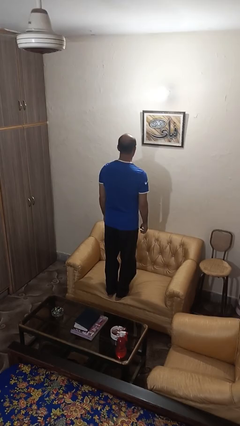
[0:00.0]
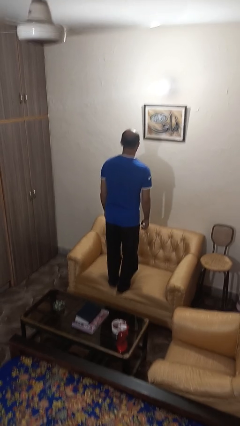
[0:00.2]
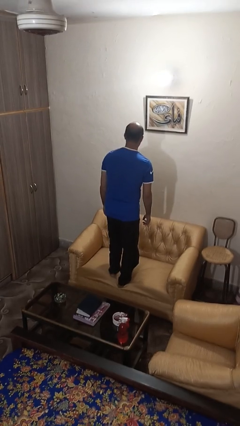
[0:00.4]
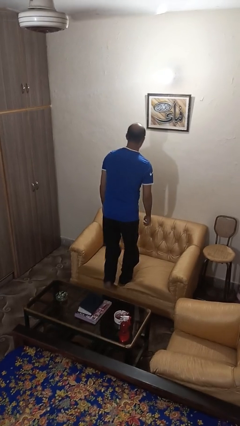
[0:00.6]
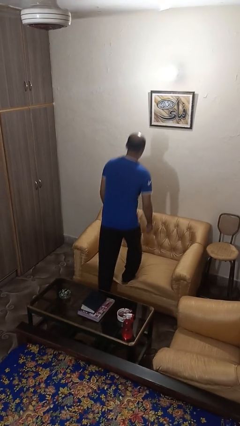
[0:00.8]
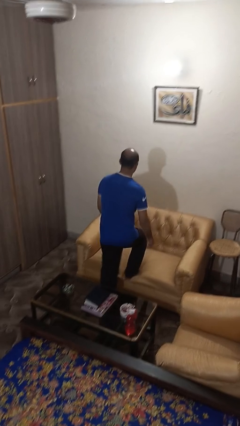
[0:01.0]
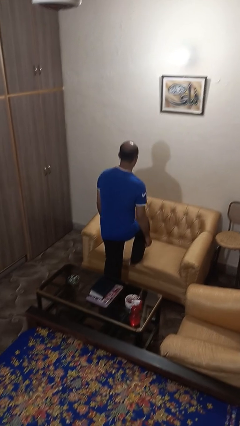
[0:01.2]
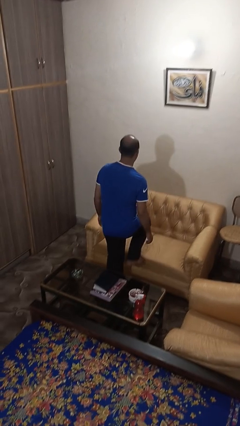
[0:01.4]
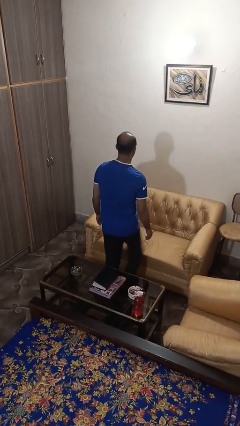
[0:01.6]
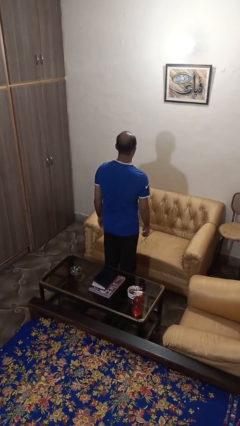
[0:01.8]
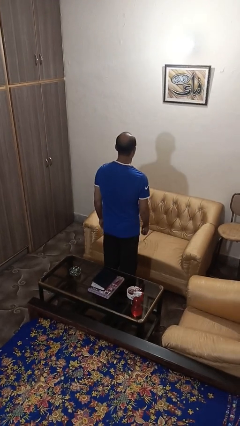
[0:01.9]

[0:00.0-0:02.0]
person climbs off couch

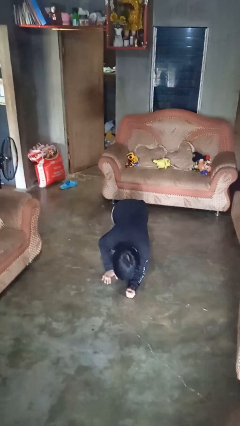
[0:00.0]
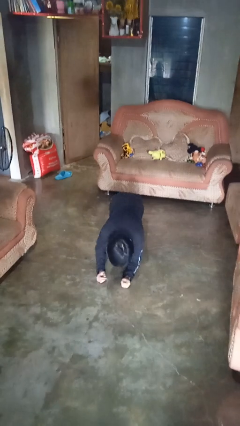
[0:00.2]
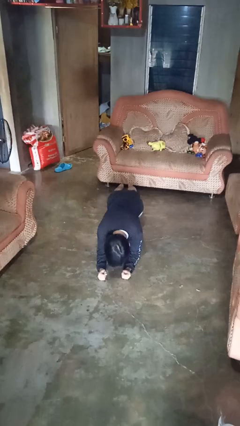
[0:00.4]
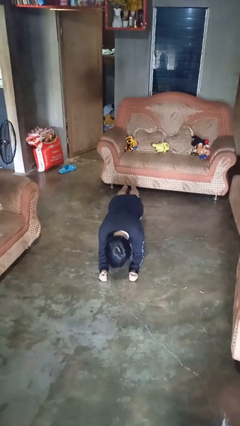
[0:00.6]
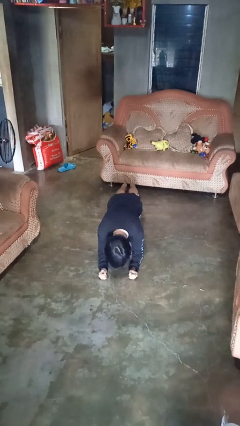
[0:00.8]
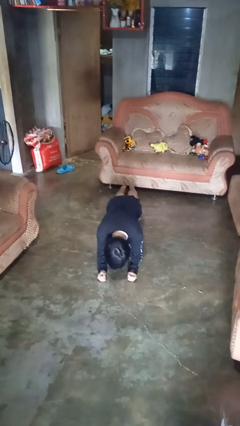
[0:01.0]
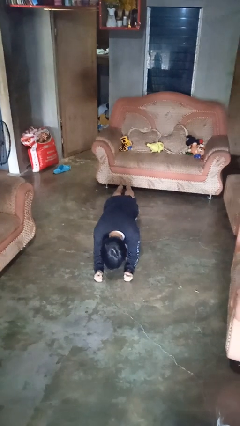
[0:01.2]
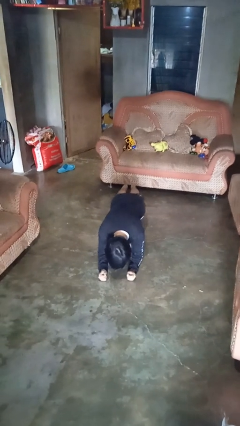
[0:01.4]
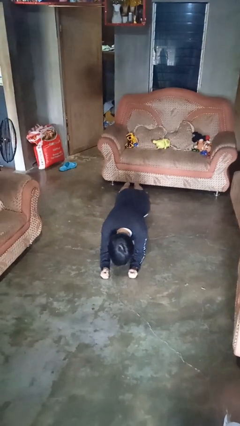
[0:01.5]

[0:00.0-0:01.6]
person exercises with plank

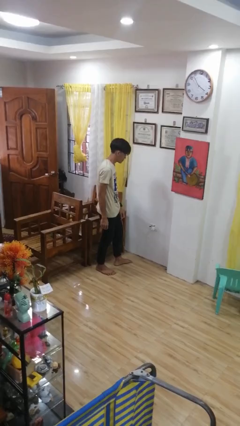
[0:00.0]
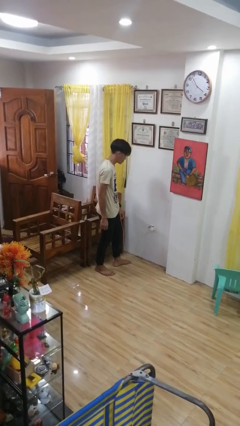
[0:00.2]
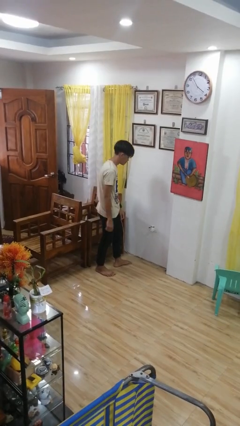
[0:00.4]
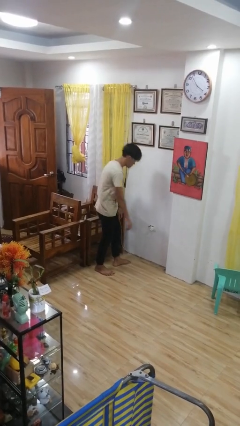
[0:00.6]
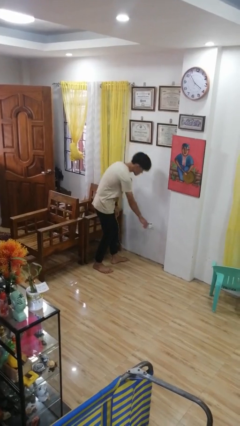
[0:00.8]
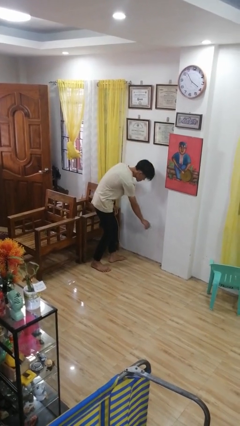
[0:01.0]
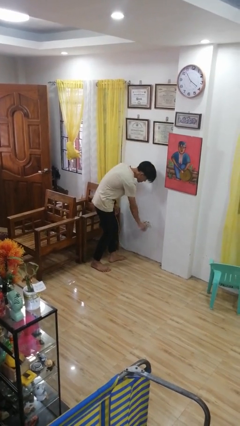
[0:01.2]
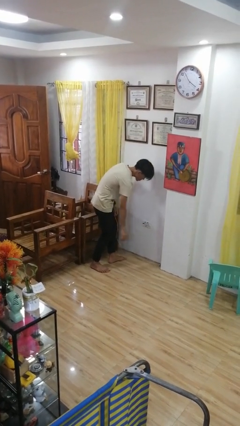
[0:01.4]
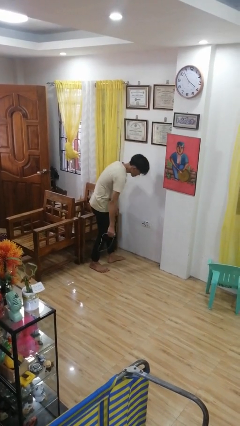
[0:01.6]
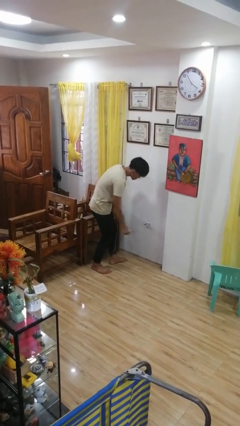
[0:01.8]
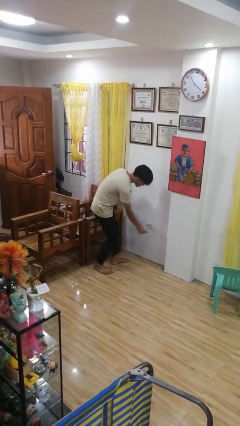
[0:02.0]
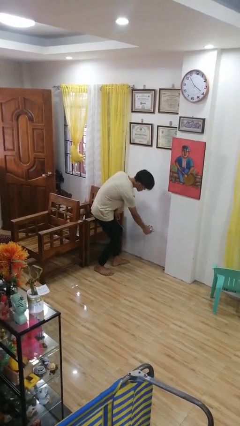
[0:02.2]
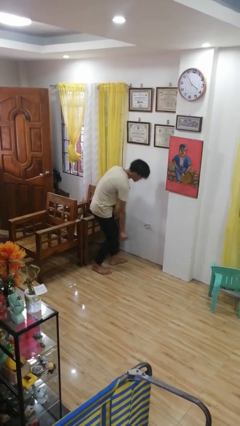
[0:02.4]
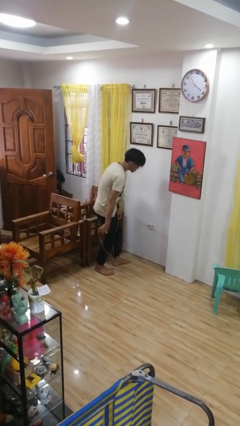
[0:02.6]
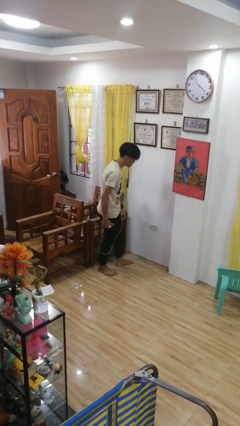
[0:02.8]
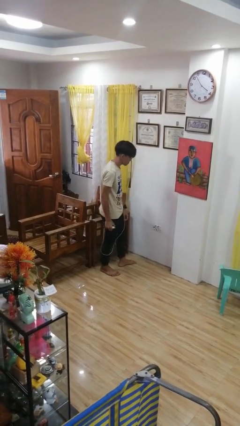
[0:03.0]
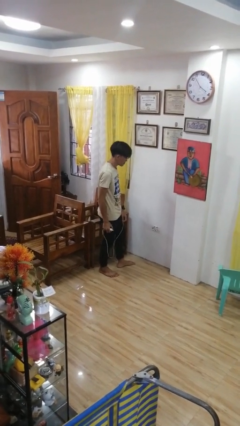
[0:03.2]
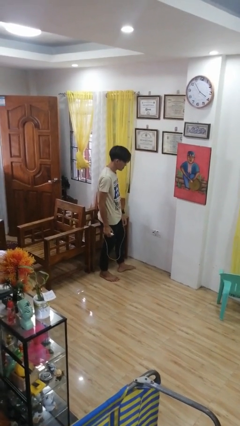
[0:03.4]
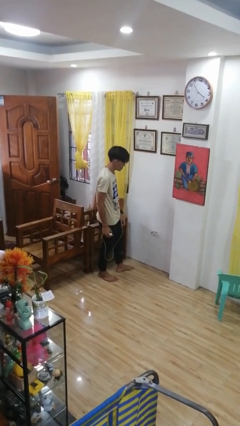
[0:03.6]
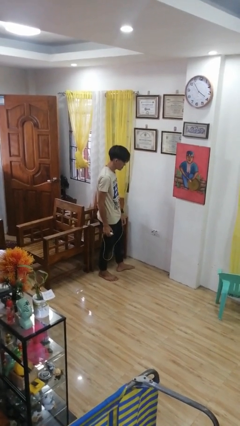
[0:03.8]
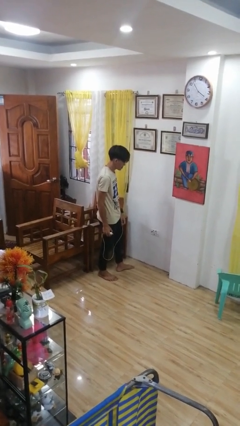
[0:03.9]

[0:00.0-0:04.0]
person unplugs from electrical socket

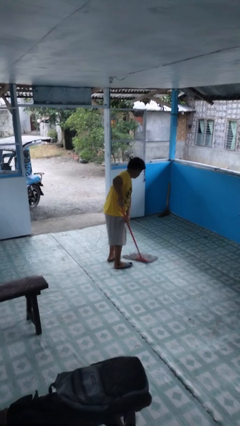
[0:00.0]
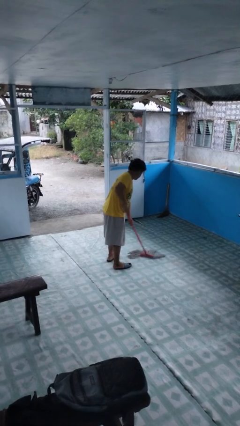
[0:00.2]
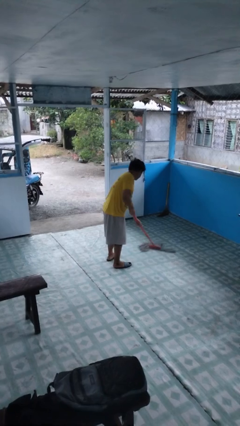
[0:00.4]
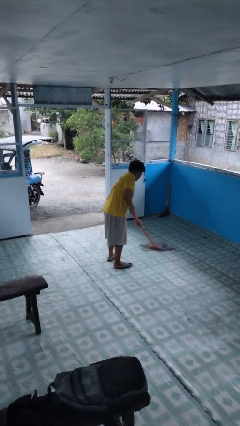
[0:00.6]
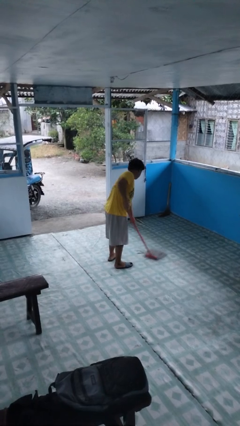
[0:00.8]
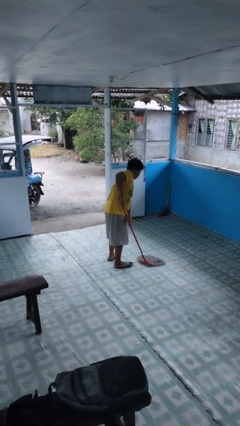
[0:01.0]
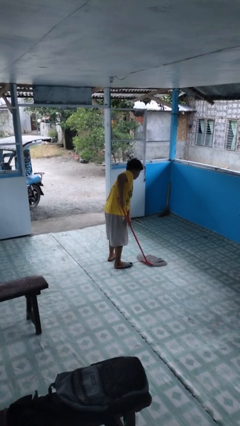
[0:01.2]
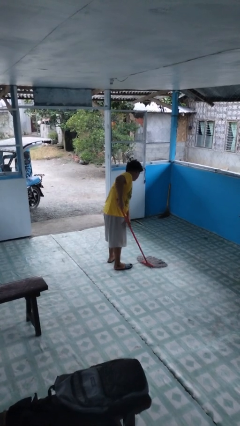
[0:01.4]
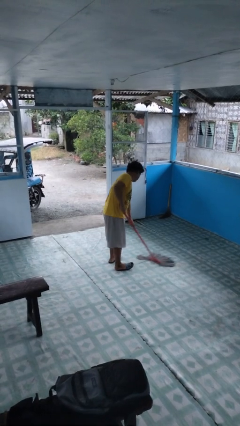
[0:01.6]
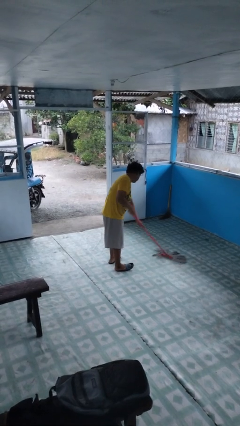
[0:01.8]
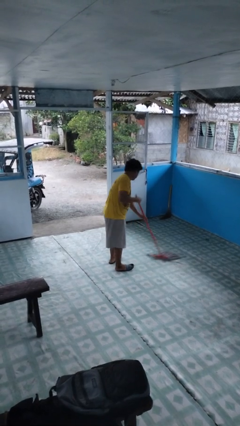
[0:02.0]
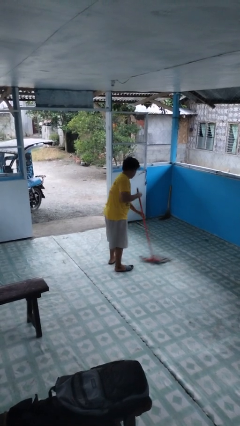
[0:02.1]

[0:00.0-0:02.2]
person mops

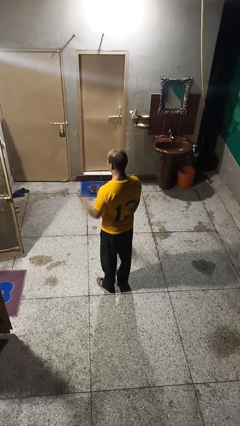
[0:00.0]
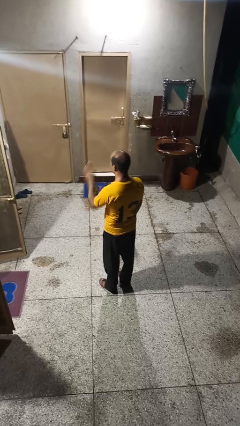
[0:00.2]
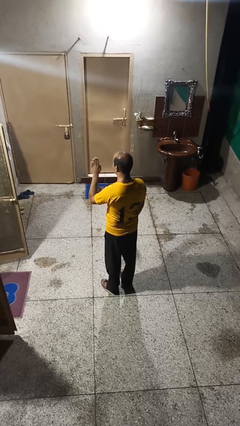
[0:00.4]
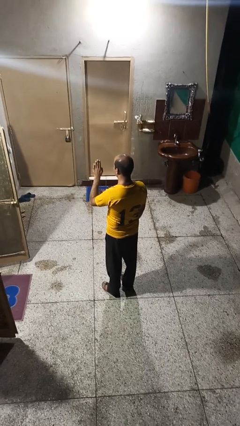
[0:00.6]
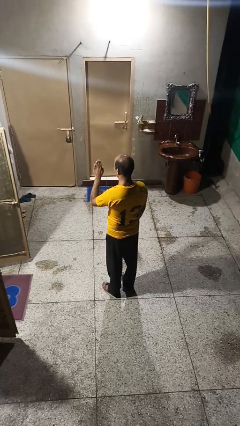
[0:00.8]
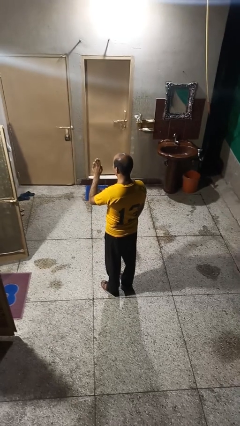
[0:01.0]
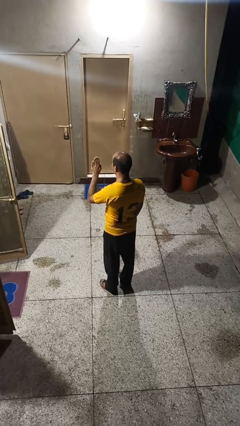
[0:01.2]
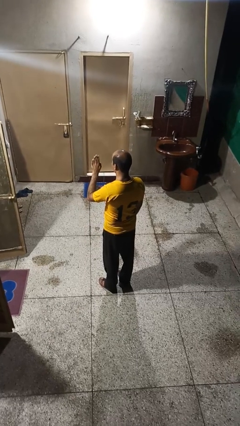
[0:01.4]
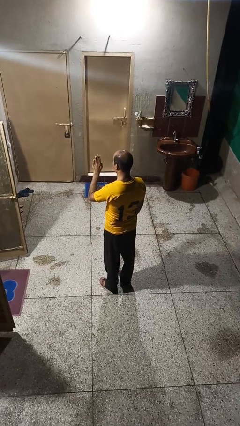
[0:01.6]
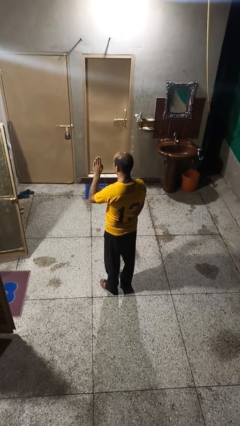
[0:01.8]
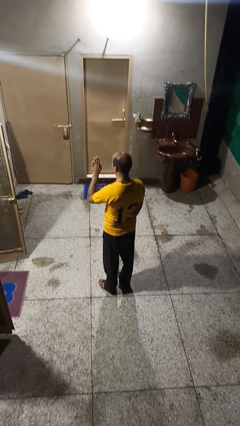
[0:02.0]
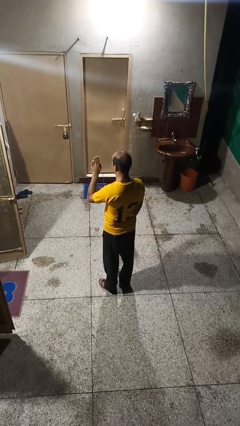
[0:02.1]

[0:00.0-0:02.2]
person gestures stop

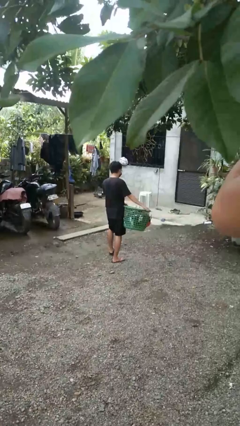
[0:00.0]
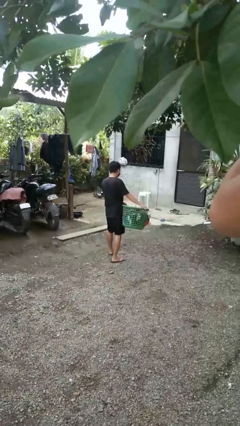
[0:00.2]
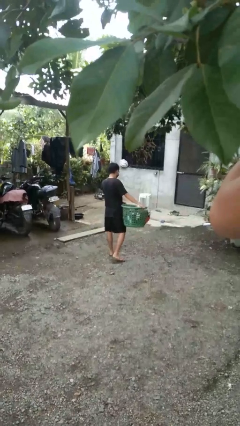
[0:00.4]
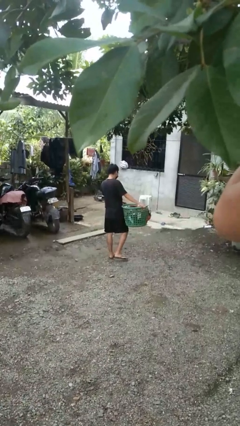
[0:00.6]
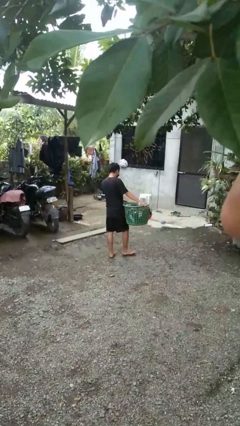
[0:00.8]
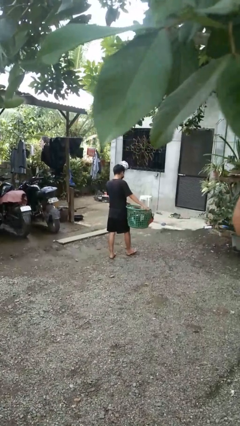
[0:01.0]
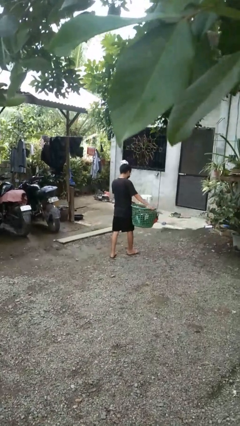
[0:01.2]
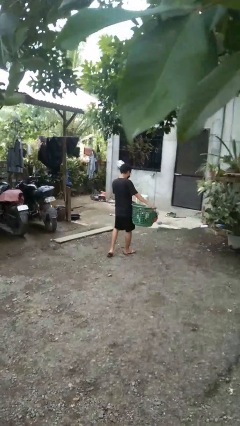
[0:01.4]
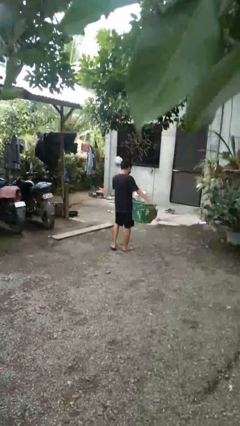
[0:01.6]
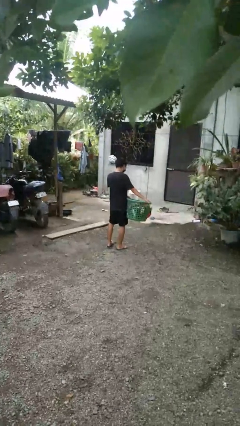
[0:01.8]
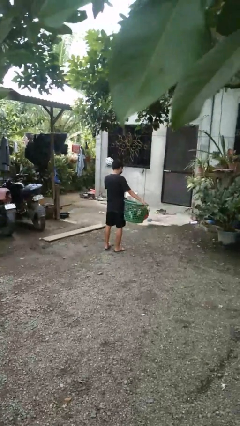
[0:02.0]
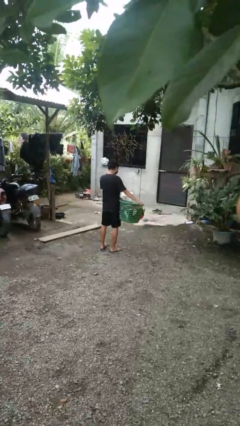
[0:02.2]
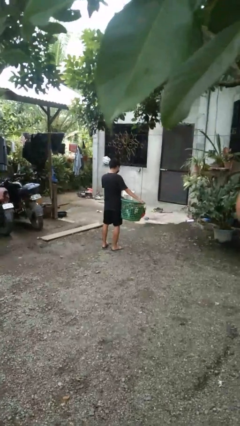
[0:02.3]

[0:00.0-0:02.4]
person carries laundry basket

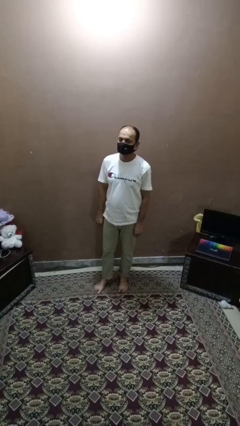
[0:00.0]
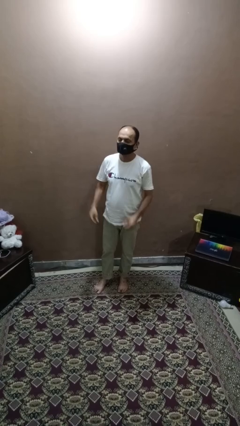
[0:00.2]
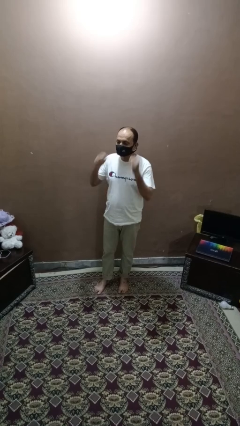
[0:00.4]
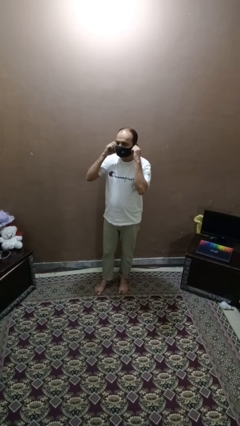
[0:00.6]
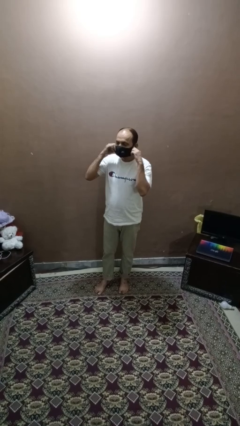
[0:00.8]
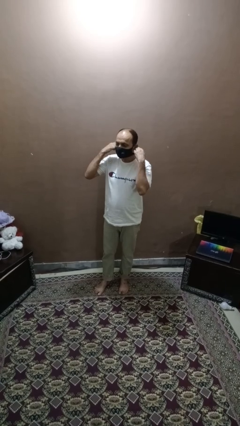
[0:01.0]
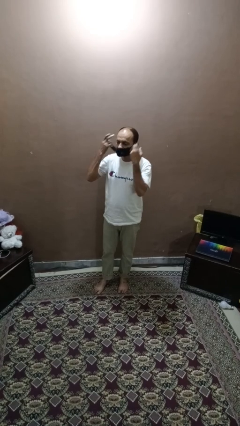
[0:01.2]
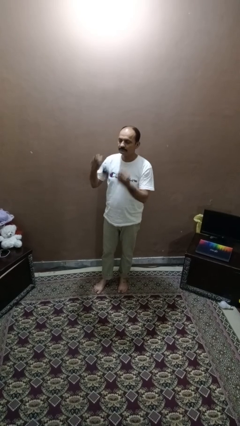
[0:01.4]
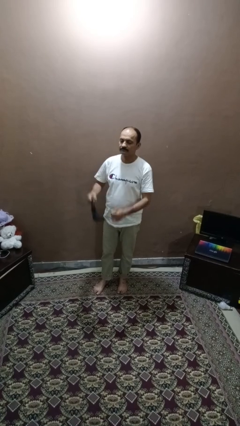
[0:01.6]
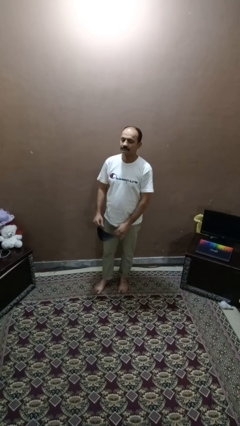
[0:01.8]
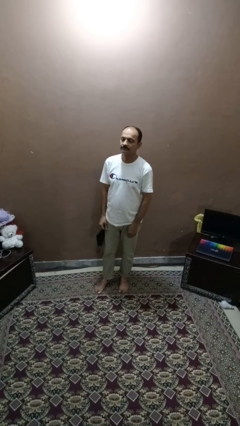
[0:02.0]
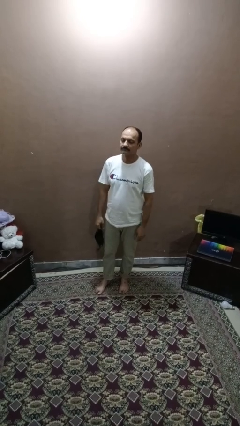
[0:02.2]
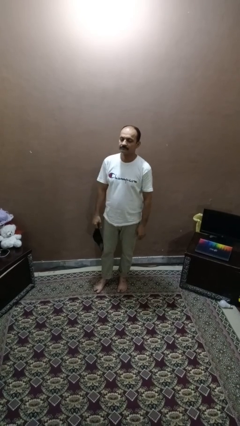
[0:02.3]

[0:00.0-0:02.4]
person takes off facemask
